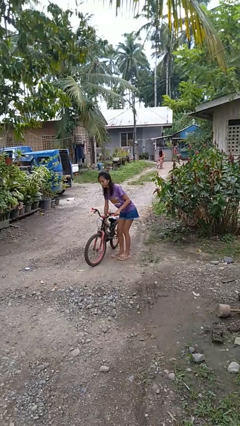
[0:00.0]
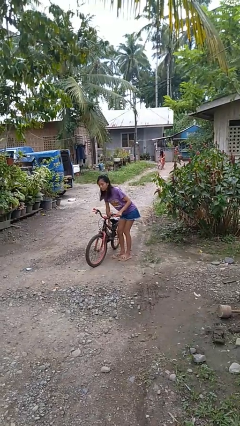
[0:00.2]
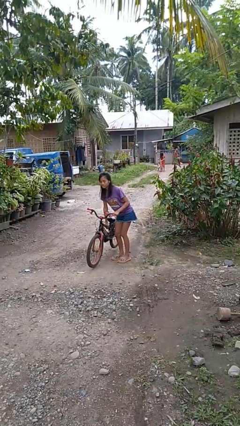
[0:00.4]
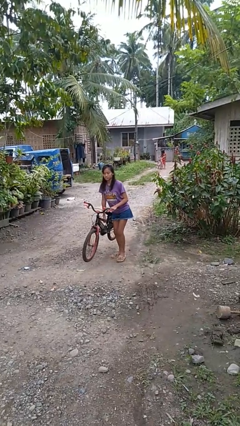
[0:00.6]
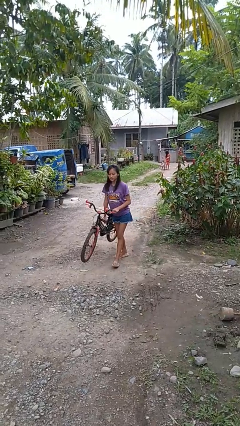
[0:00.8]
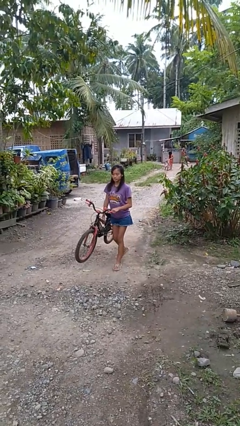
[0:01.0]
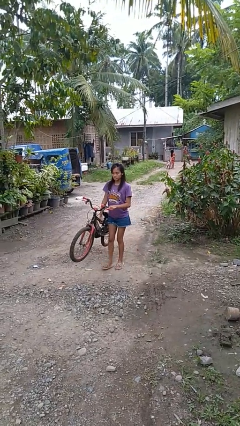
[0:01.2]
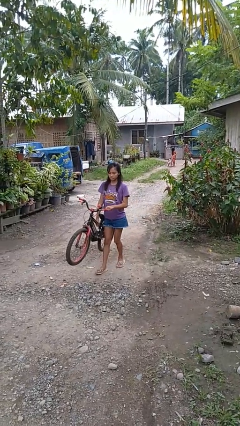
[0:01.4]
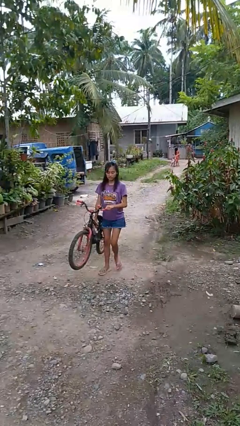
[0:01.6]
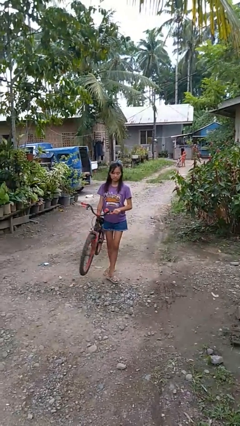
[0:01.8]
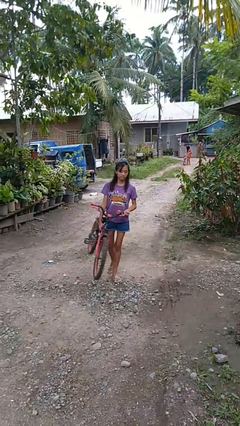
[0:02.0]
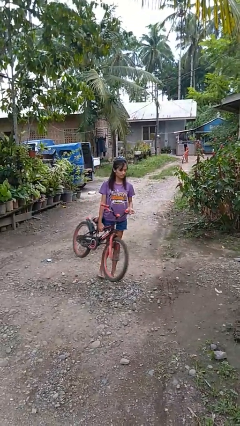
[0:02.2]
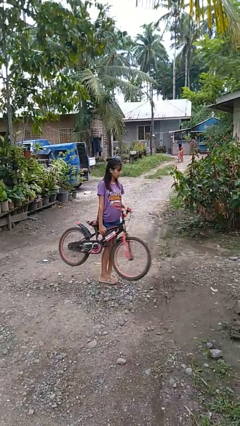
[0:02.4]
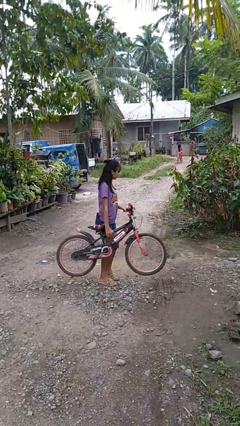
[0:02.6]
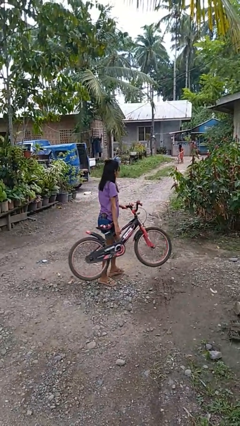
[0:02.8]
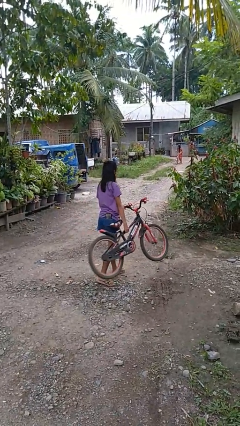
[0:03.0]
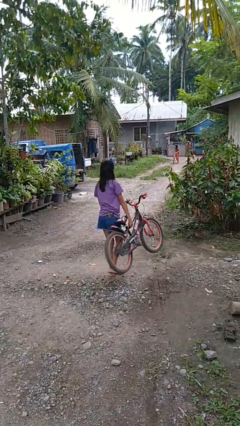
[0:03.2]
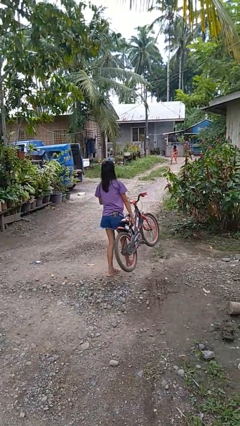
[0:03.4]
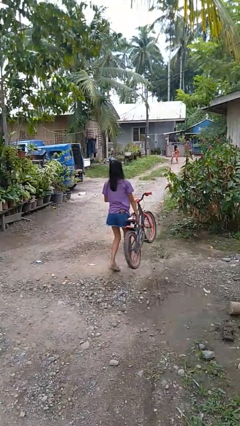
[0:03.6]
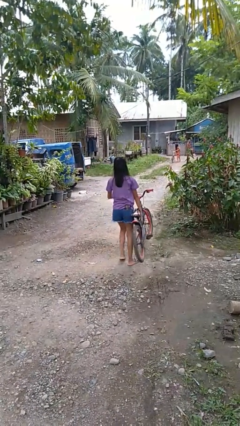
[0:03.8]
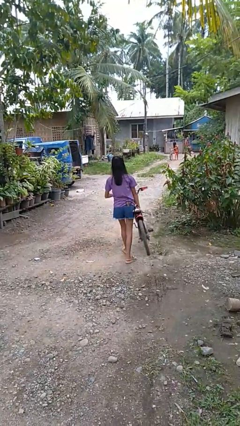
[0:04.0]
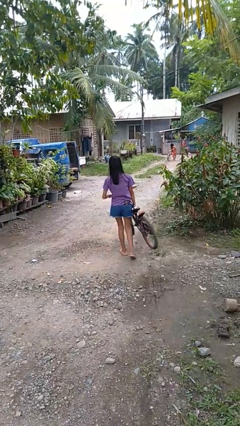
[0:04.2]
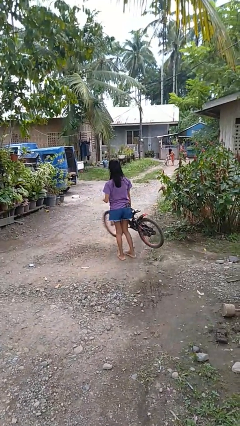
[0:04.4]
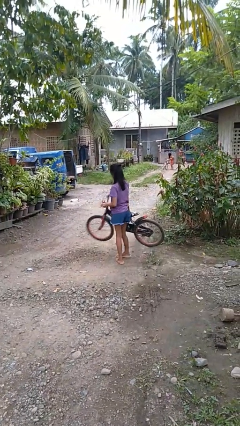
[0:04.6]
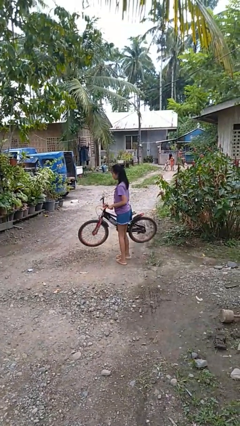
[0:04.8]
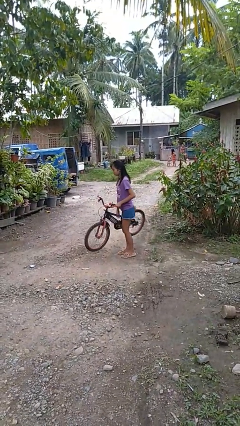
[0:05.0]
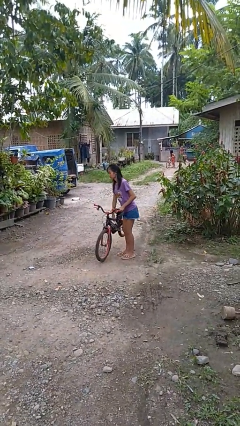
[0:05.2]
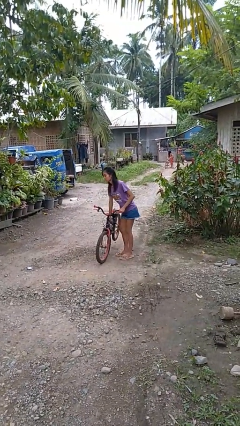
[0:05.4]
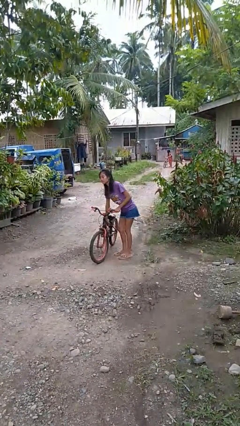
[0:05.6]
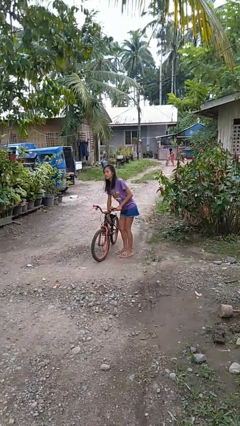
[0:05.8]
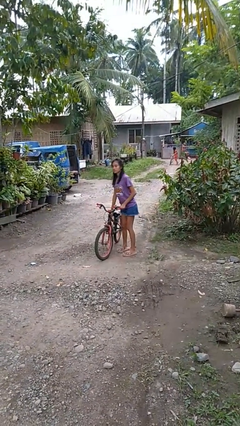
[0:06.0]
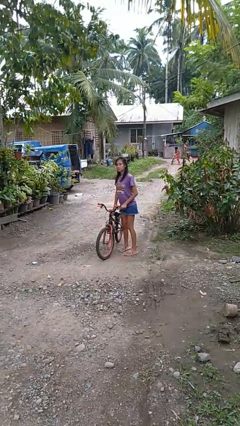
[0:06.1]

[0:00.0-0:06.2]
person carries bicycle

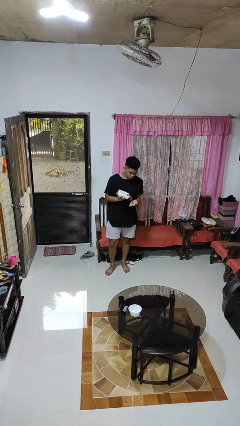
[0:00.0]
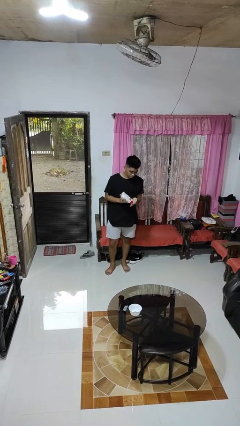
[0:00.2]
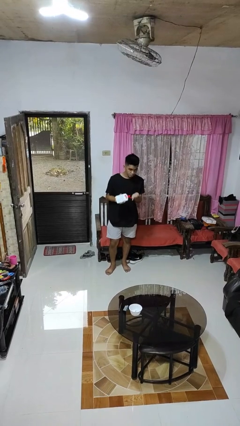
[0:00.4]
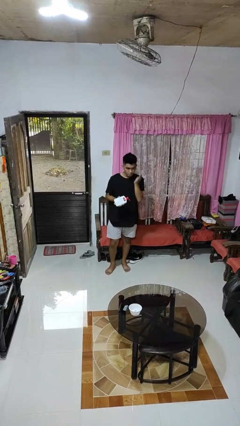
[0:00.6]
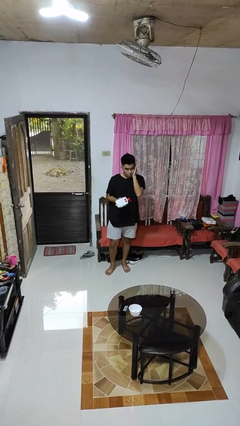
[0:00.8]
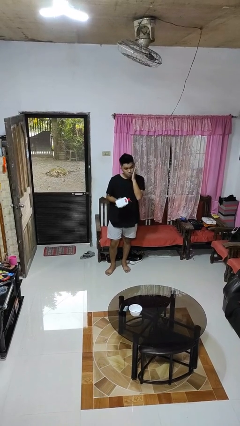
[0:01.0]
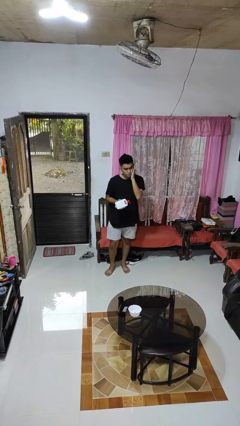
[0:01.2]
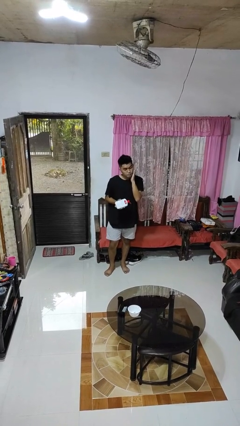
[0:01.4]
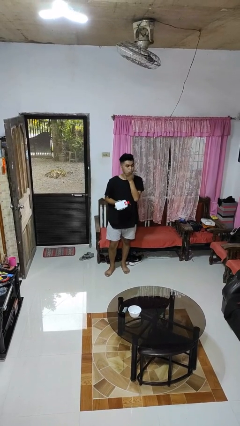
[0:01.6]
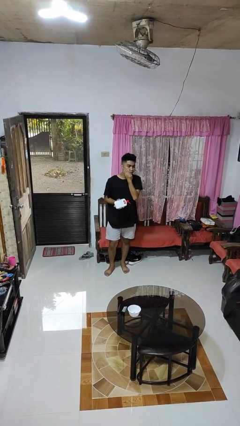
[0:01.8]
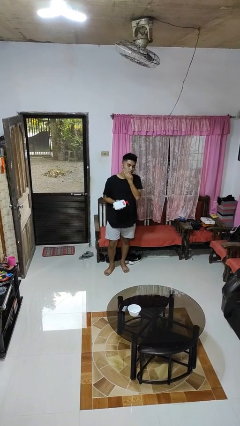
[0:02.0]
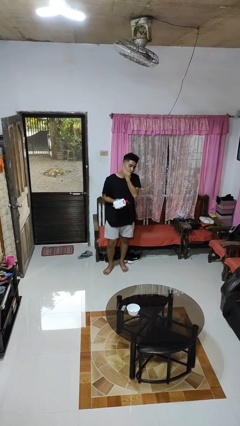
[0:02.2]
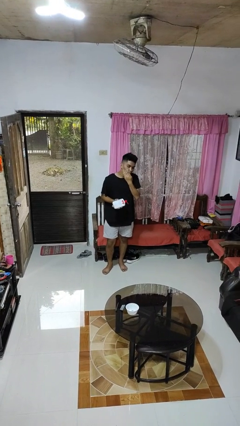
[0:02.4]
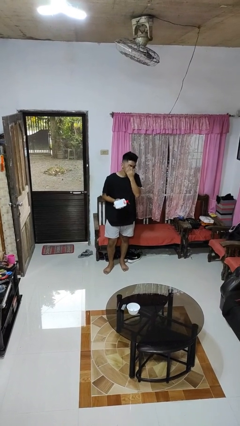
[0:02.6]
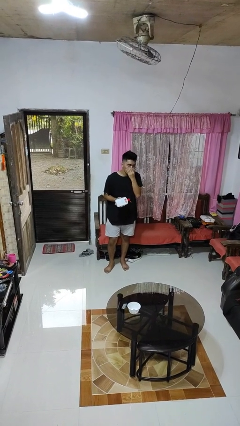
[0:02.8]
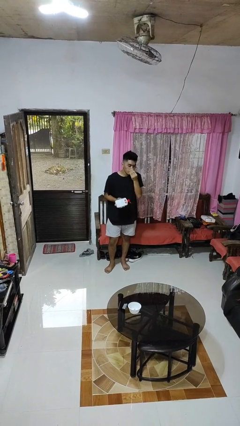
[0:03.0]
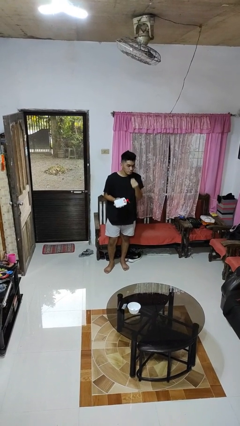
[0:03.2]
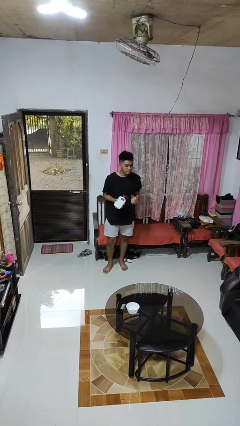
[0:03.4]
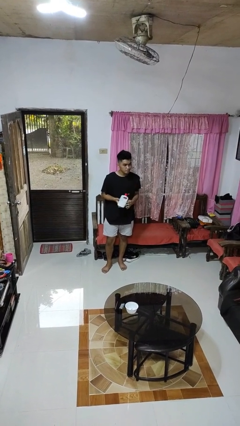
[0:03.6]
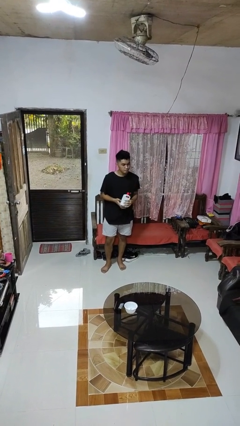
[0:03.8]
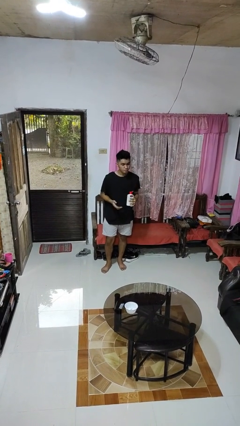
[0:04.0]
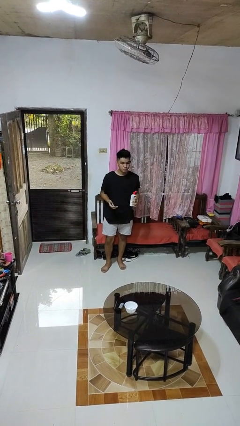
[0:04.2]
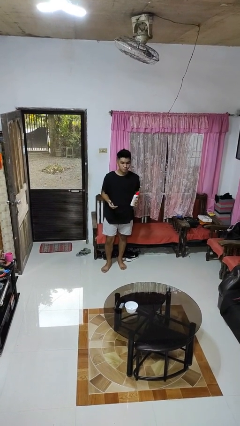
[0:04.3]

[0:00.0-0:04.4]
person applies facial moisturizer

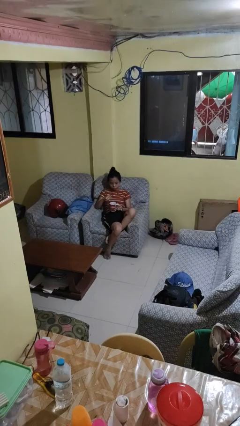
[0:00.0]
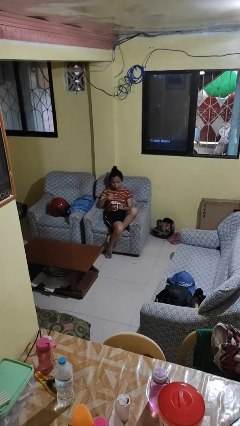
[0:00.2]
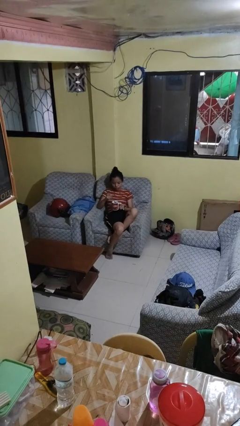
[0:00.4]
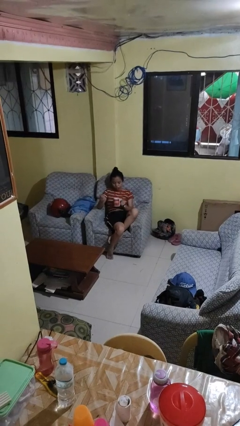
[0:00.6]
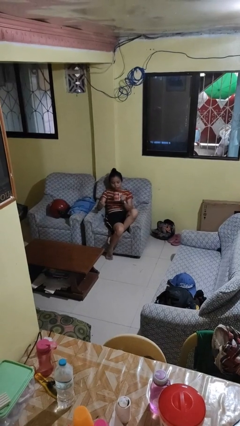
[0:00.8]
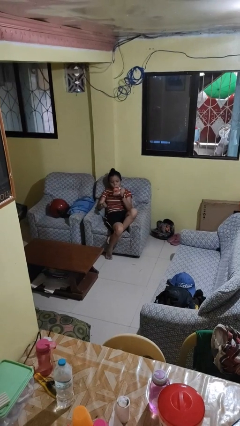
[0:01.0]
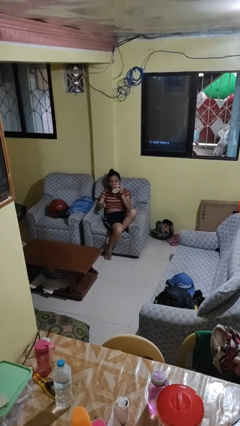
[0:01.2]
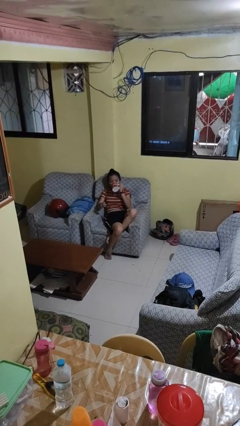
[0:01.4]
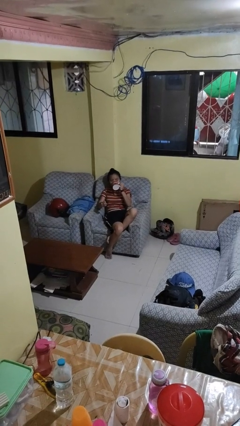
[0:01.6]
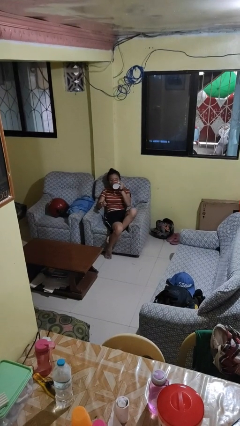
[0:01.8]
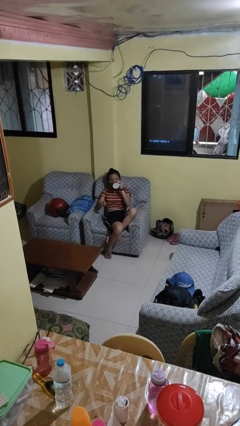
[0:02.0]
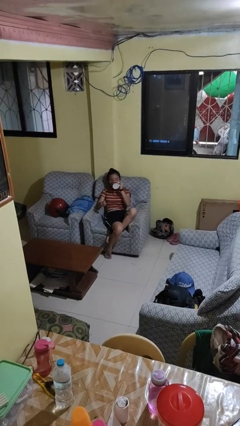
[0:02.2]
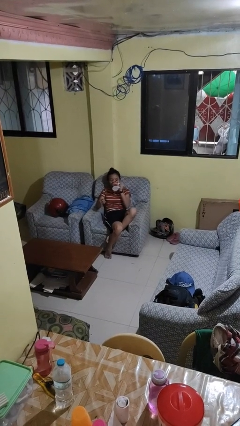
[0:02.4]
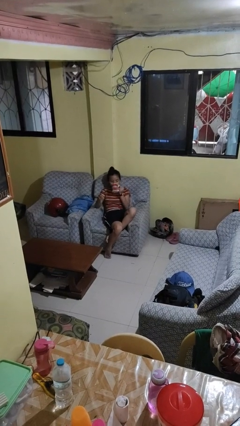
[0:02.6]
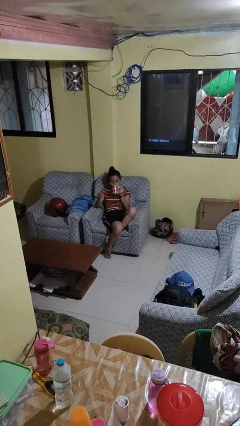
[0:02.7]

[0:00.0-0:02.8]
person drinks from mug

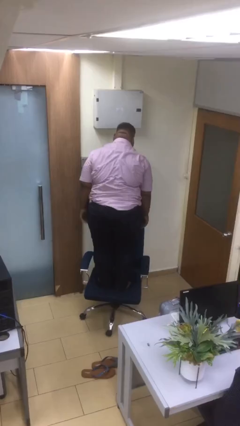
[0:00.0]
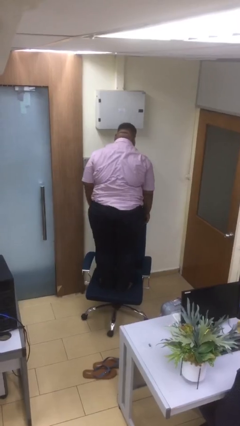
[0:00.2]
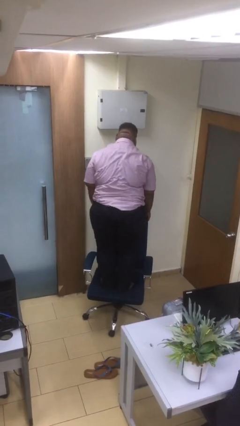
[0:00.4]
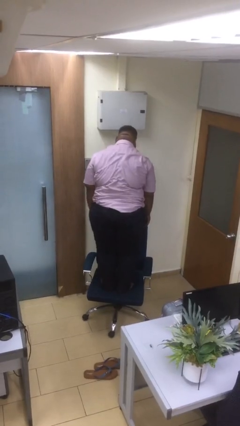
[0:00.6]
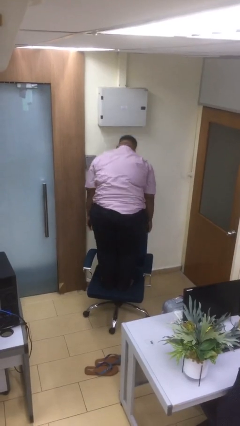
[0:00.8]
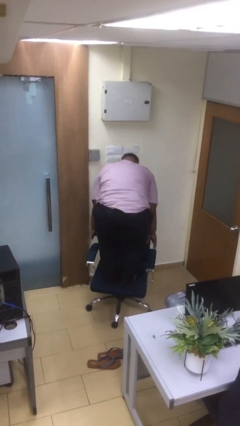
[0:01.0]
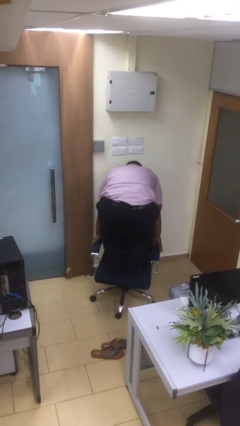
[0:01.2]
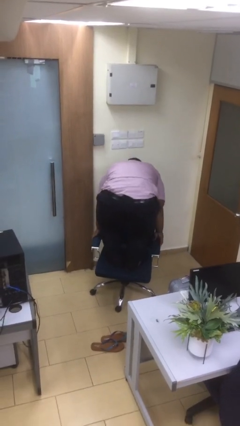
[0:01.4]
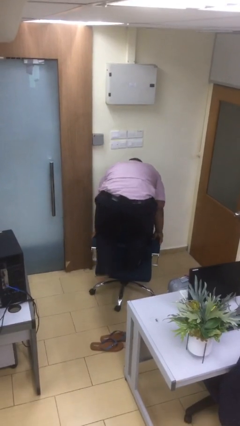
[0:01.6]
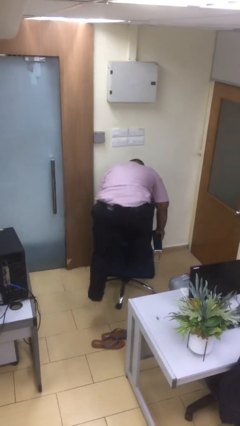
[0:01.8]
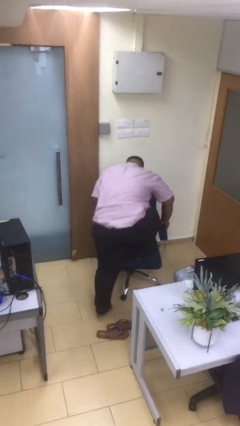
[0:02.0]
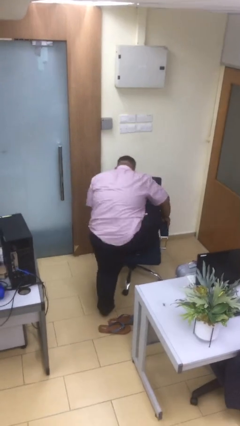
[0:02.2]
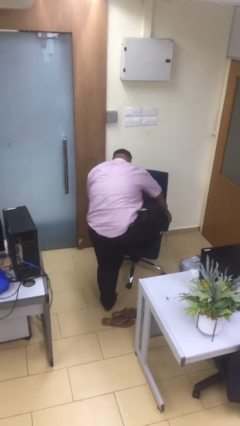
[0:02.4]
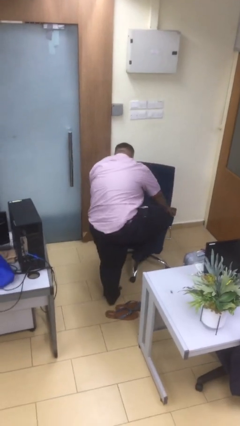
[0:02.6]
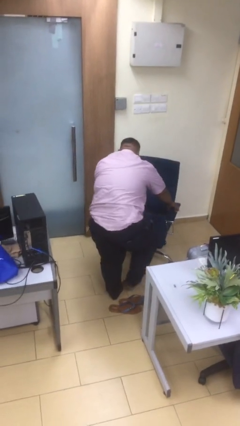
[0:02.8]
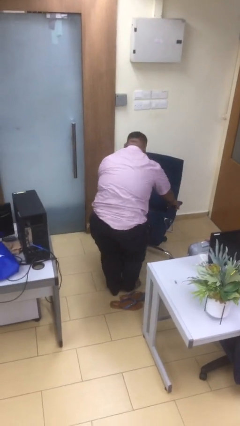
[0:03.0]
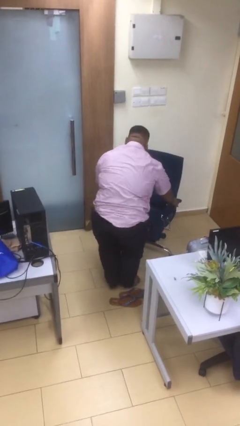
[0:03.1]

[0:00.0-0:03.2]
person climbs off chair

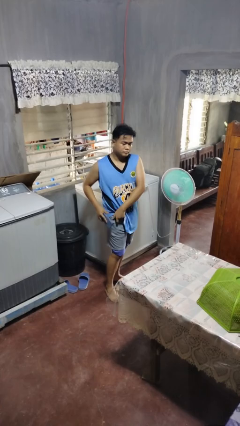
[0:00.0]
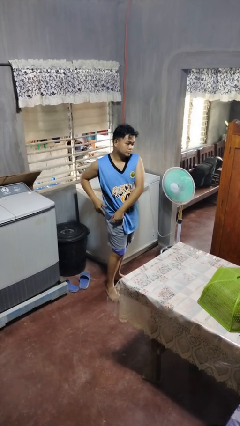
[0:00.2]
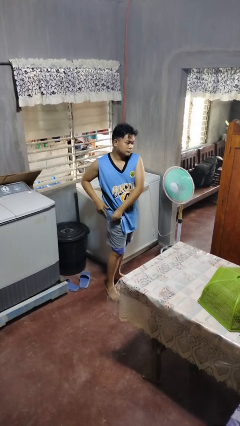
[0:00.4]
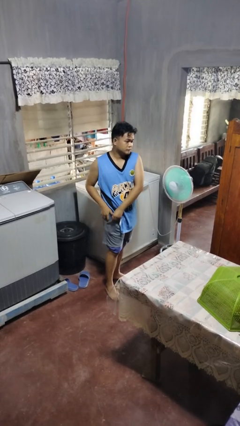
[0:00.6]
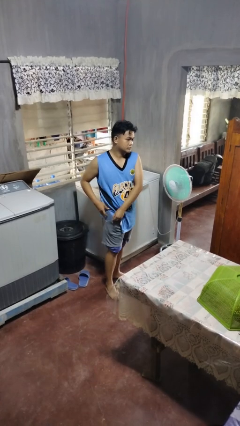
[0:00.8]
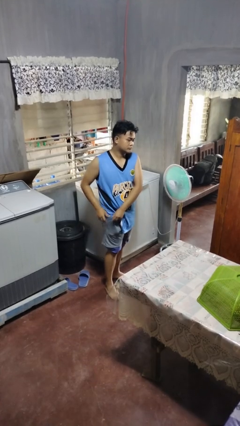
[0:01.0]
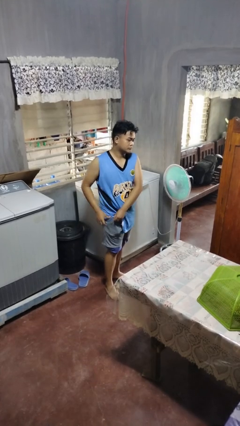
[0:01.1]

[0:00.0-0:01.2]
person puts phone into pocket

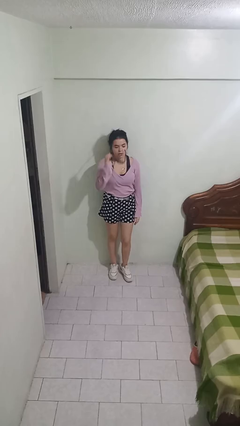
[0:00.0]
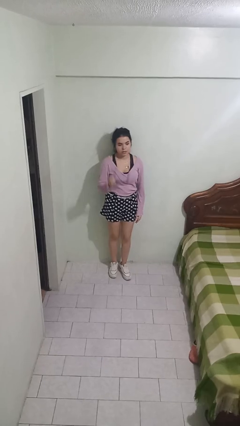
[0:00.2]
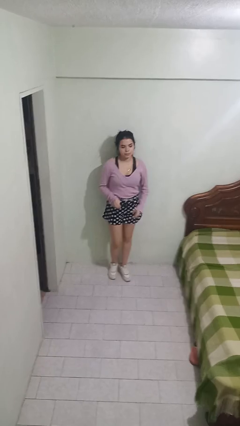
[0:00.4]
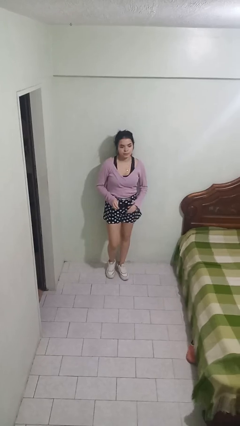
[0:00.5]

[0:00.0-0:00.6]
person takes off sunglasses
